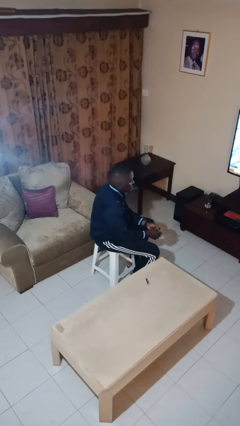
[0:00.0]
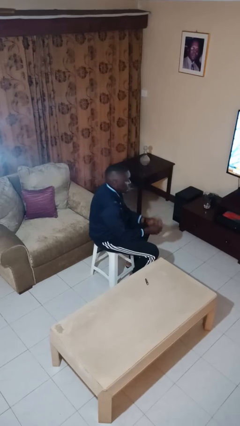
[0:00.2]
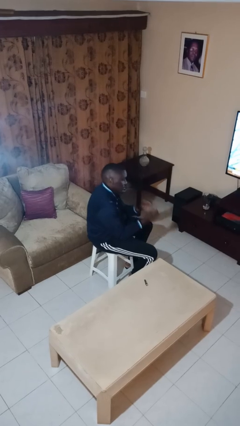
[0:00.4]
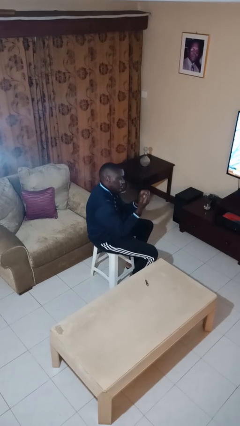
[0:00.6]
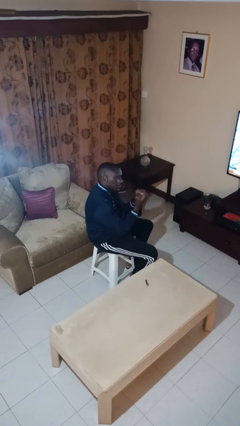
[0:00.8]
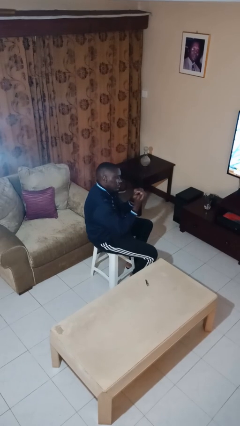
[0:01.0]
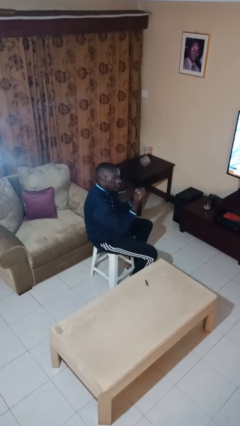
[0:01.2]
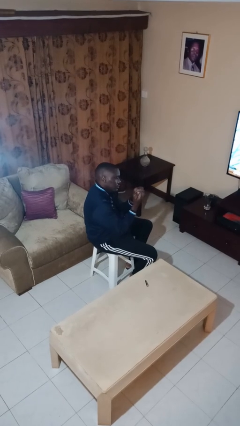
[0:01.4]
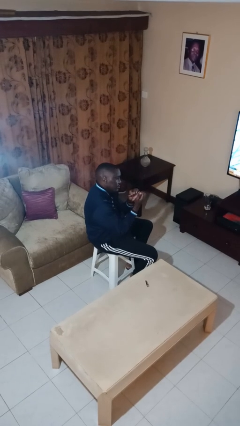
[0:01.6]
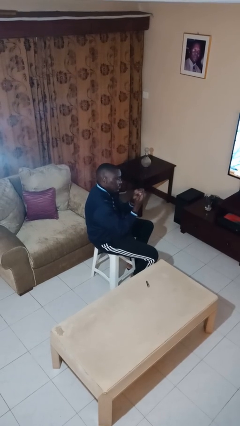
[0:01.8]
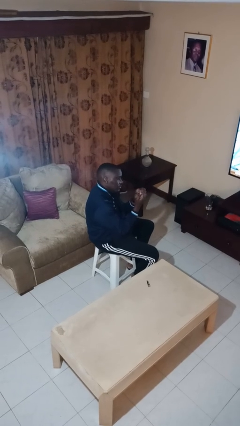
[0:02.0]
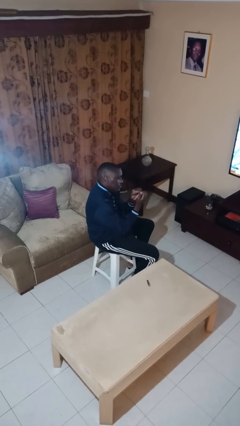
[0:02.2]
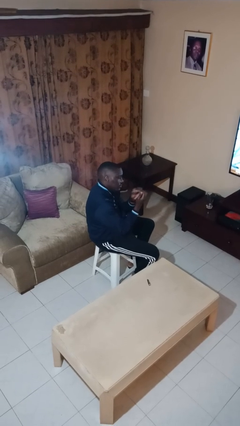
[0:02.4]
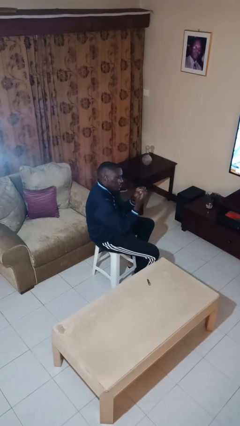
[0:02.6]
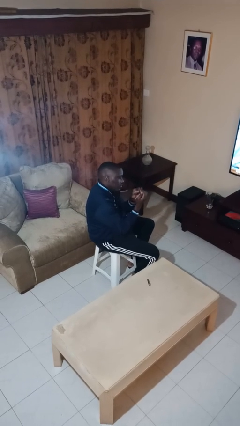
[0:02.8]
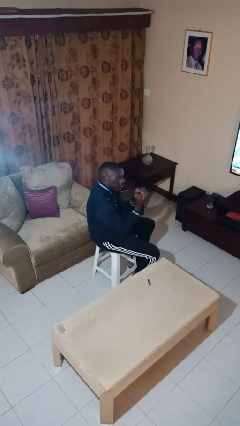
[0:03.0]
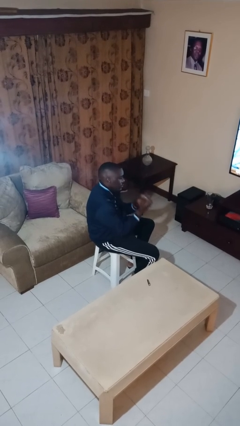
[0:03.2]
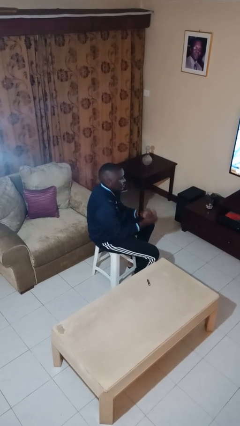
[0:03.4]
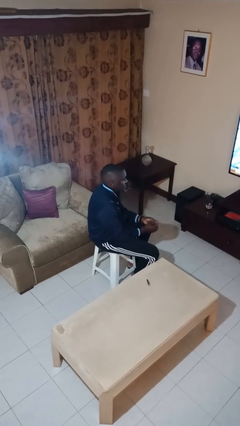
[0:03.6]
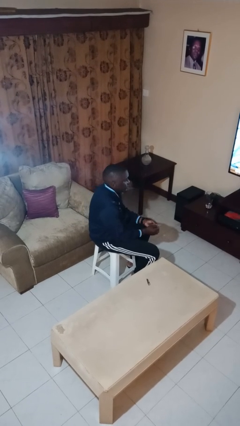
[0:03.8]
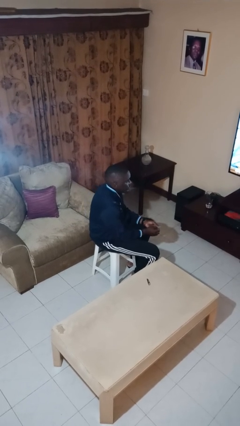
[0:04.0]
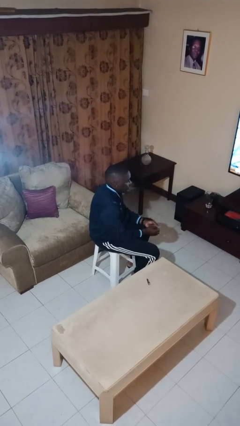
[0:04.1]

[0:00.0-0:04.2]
person files fingernails

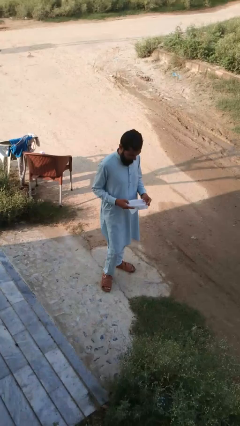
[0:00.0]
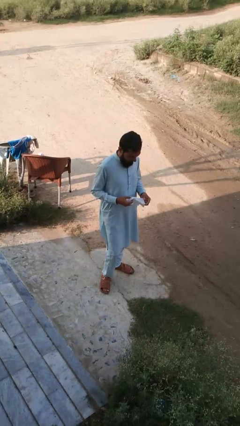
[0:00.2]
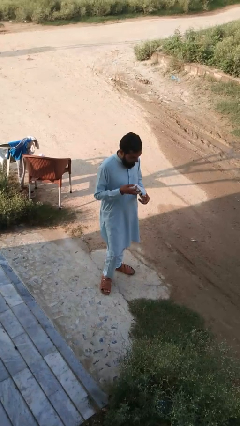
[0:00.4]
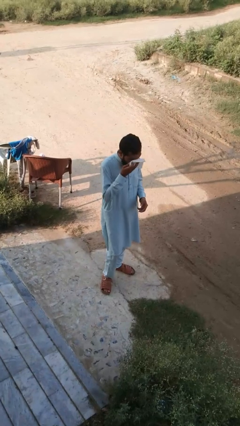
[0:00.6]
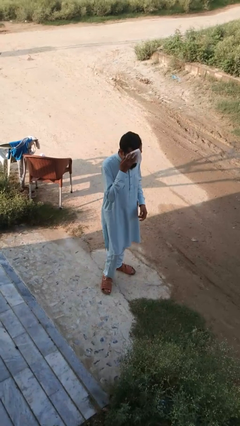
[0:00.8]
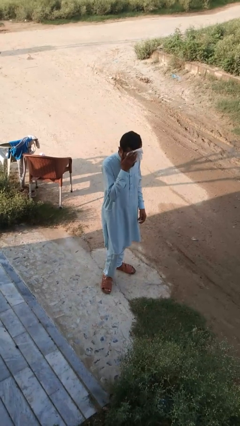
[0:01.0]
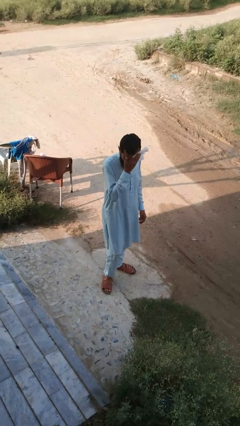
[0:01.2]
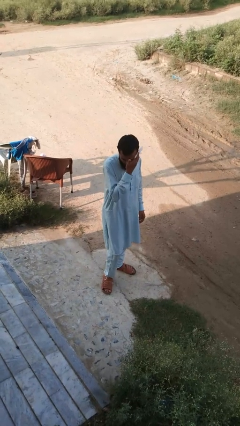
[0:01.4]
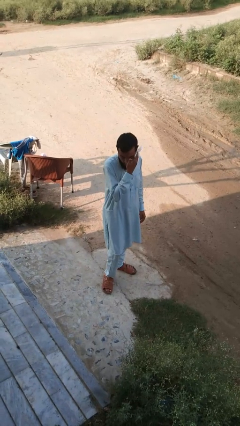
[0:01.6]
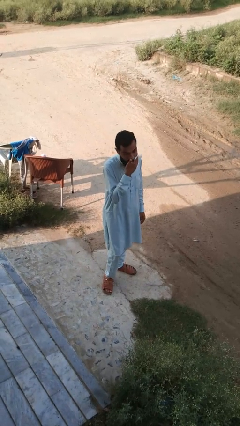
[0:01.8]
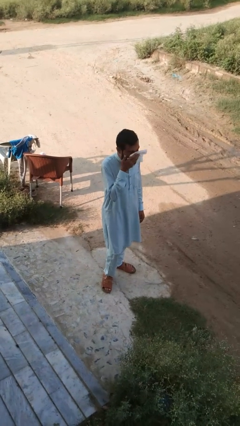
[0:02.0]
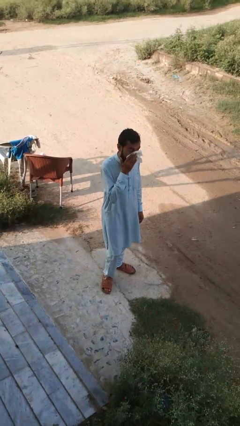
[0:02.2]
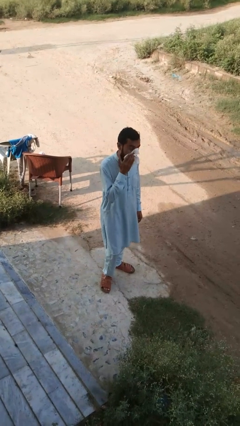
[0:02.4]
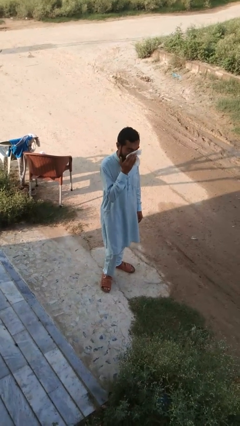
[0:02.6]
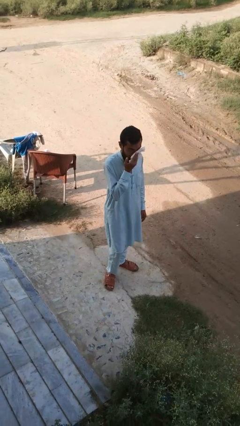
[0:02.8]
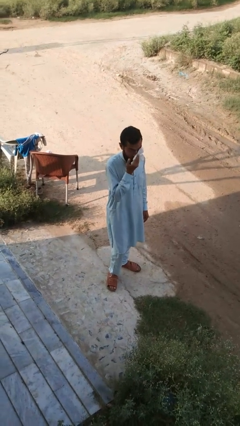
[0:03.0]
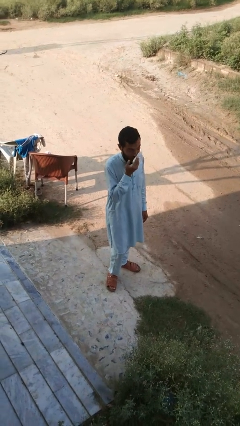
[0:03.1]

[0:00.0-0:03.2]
person wipes mouth with napkin

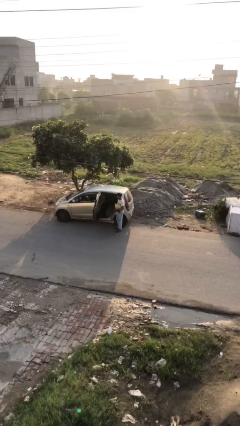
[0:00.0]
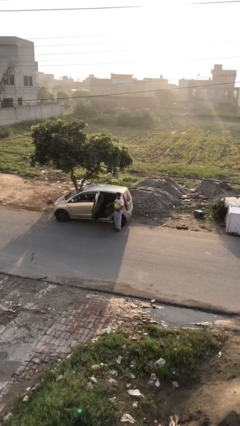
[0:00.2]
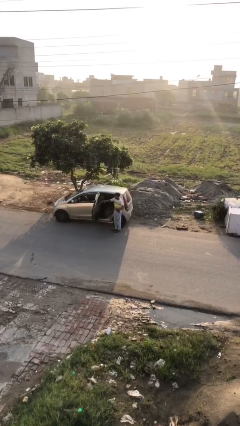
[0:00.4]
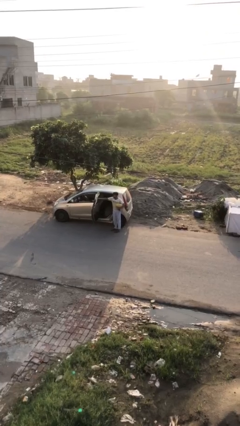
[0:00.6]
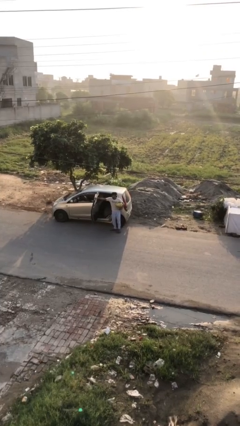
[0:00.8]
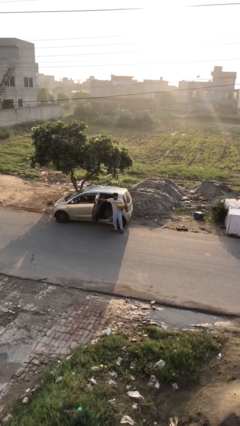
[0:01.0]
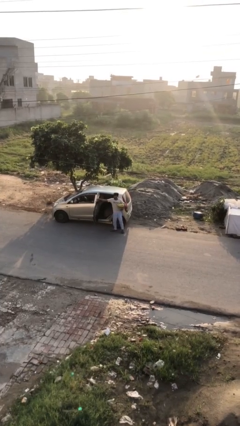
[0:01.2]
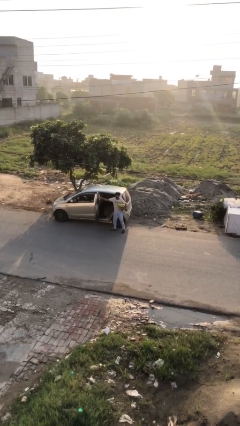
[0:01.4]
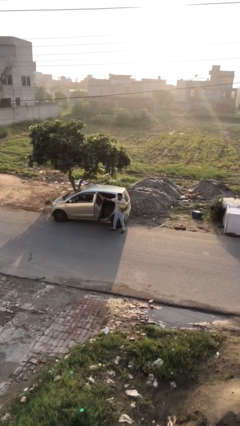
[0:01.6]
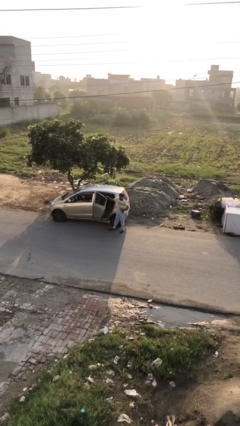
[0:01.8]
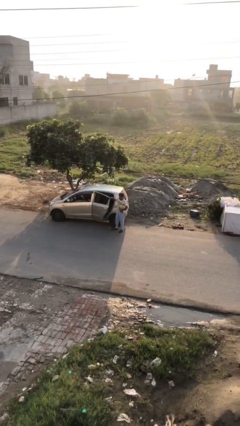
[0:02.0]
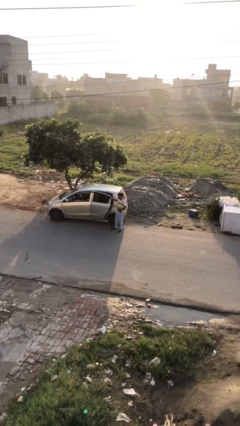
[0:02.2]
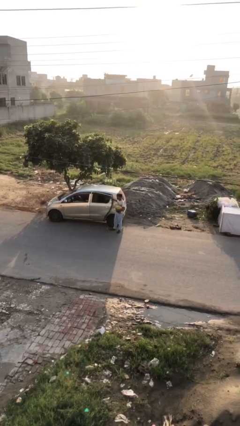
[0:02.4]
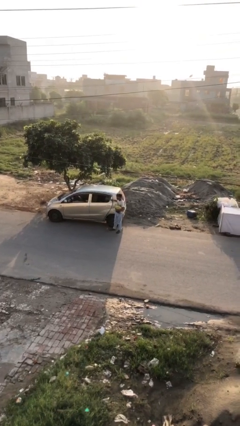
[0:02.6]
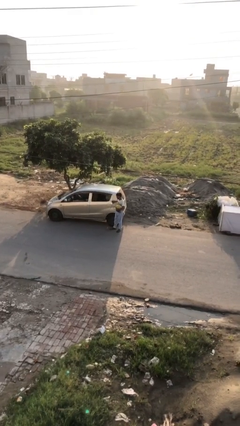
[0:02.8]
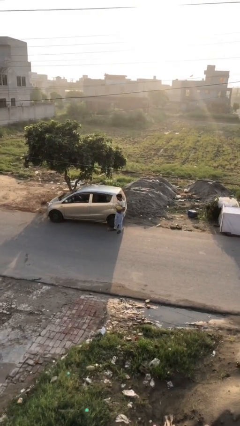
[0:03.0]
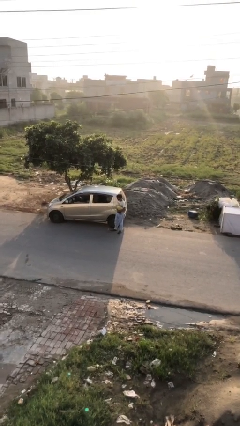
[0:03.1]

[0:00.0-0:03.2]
person closes car door

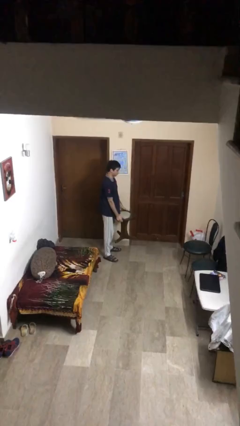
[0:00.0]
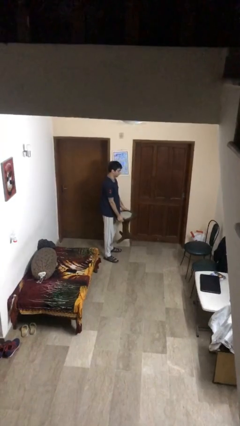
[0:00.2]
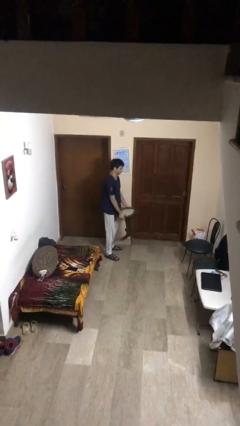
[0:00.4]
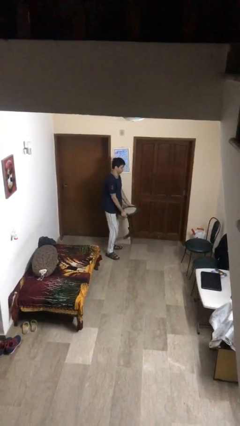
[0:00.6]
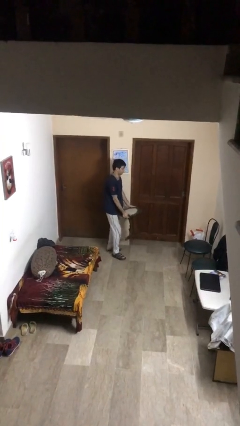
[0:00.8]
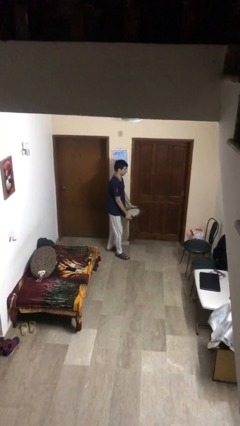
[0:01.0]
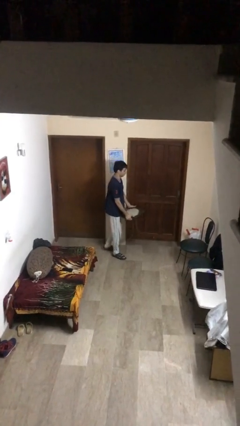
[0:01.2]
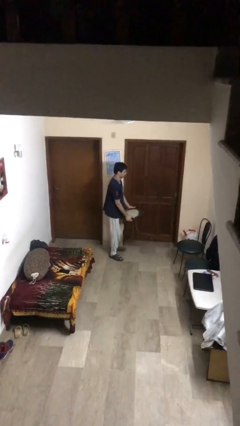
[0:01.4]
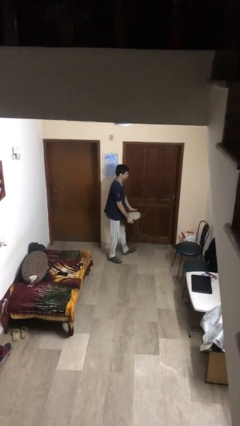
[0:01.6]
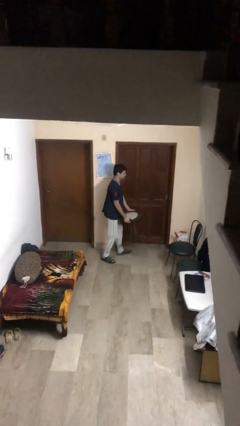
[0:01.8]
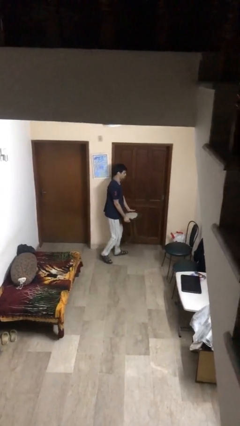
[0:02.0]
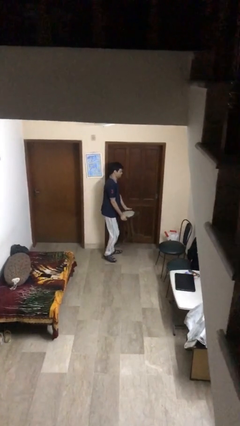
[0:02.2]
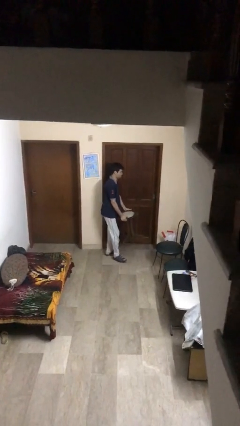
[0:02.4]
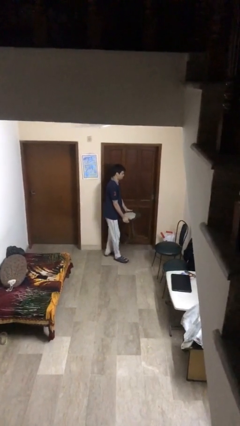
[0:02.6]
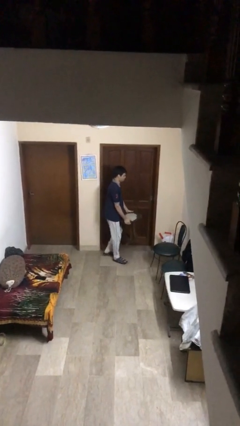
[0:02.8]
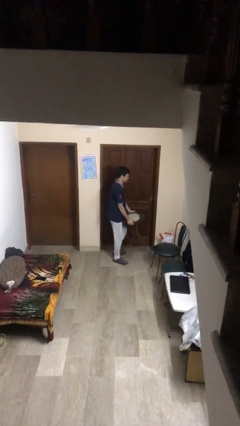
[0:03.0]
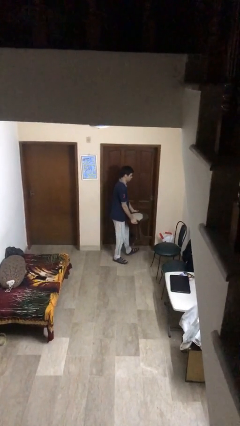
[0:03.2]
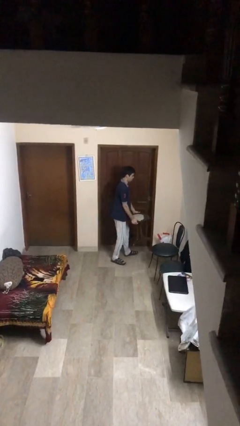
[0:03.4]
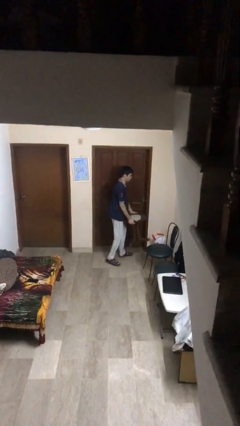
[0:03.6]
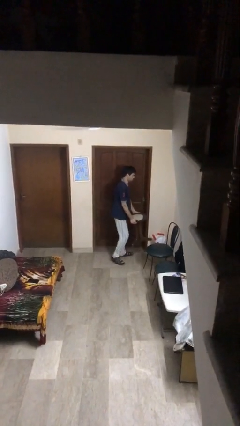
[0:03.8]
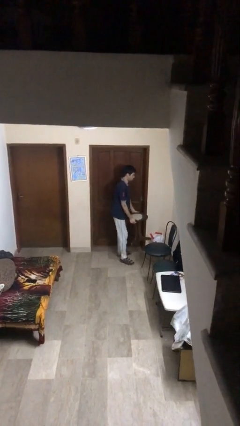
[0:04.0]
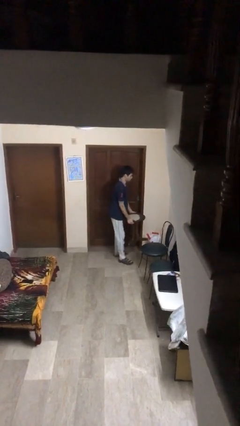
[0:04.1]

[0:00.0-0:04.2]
person carries heavy object

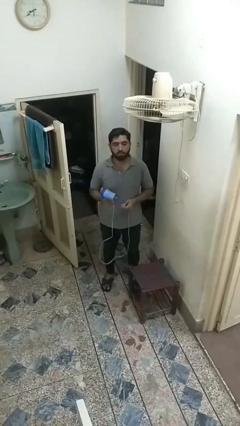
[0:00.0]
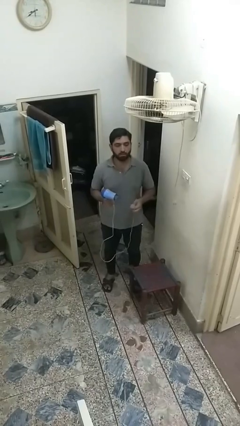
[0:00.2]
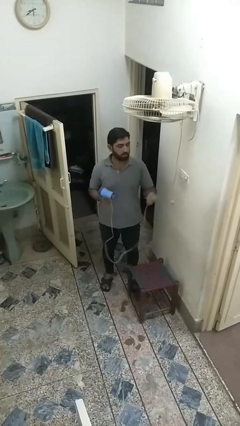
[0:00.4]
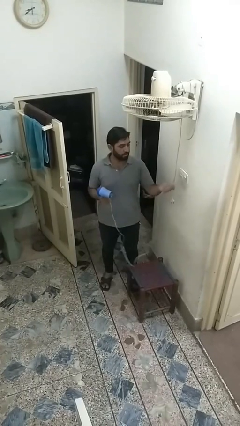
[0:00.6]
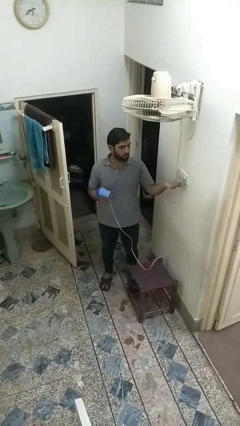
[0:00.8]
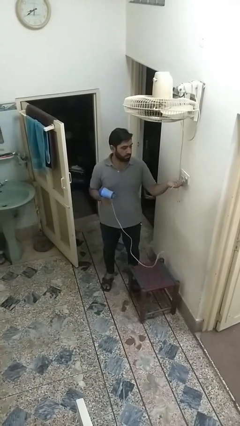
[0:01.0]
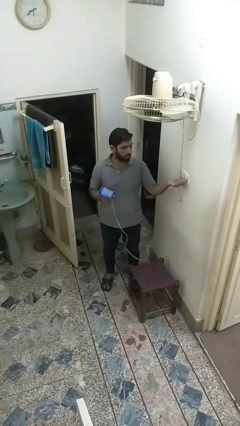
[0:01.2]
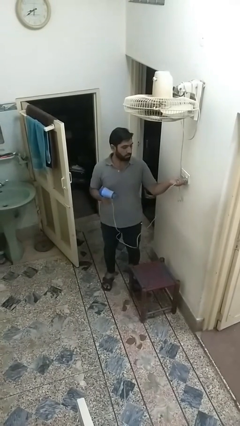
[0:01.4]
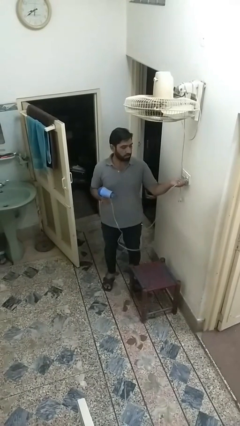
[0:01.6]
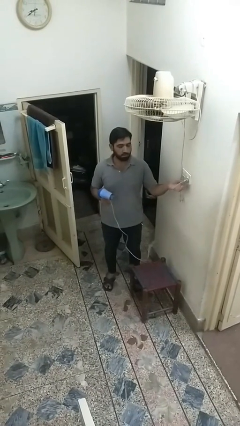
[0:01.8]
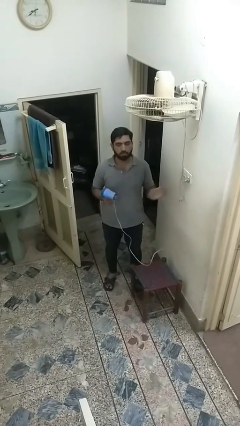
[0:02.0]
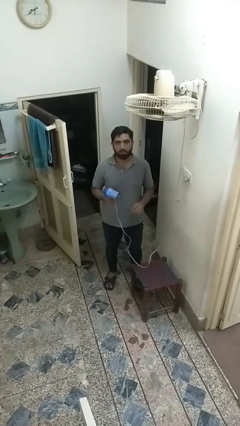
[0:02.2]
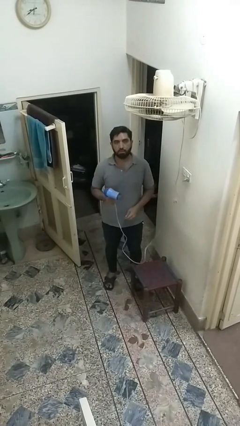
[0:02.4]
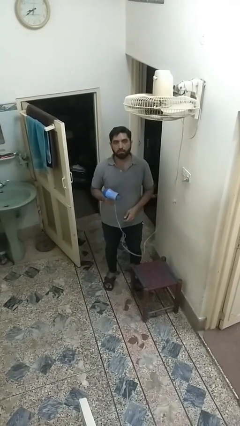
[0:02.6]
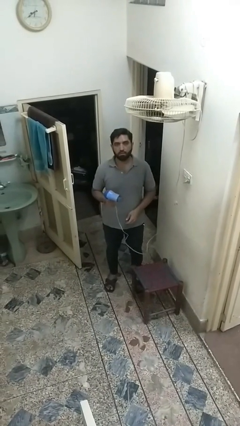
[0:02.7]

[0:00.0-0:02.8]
person plugs into electrical socket
